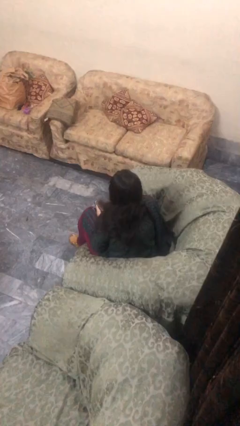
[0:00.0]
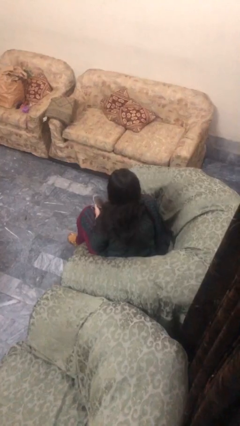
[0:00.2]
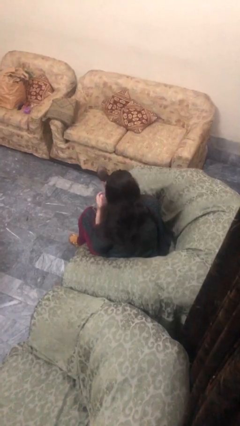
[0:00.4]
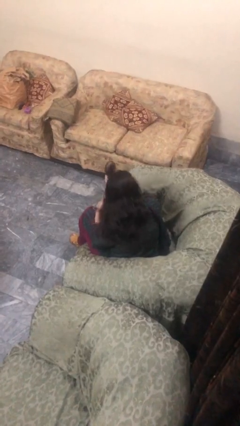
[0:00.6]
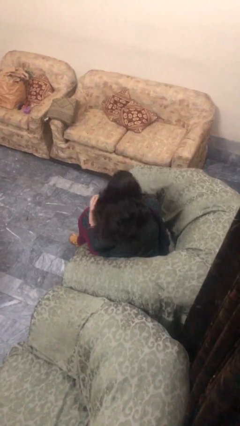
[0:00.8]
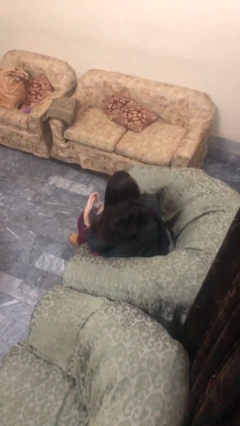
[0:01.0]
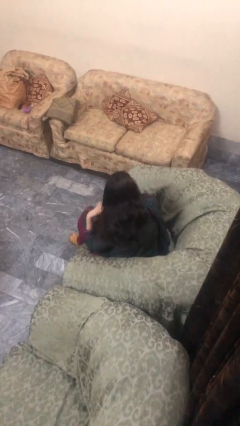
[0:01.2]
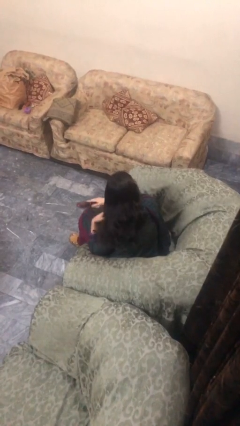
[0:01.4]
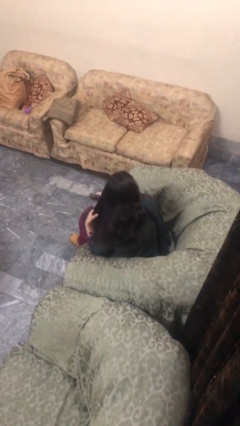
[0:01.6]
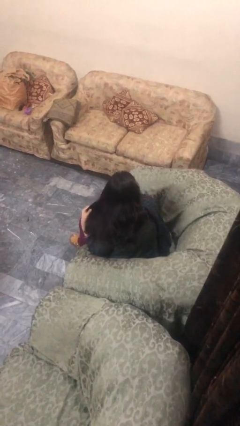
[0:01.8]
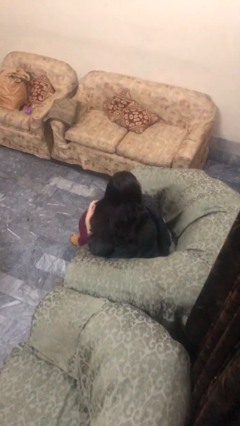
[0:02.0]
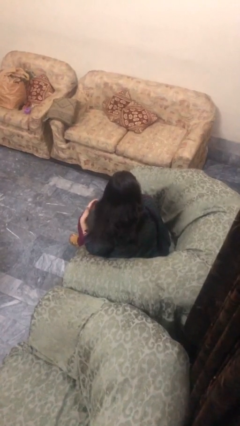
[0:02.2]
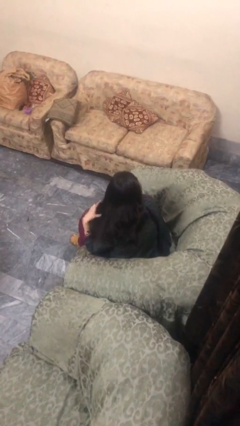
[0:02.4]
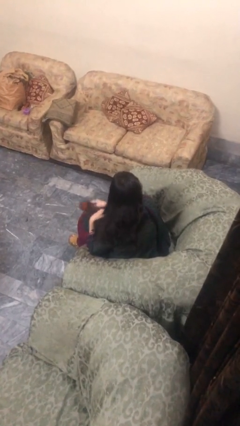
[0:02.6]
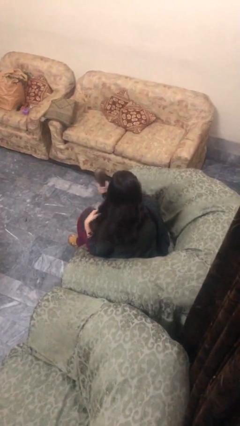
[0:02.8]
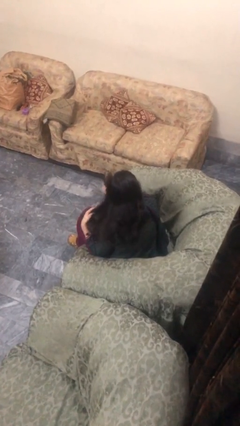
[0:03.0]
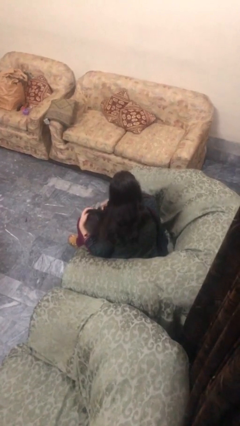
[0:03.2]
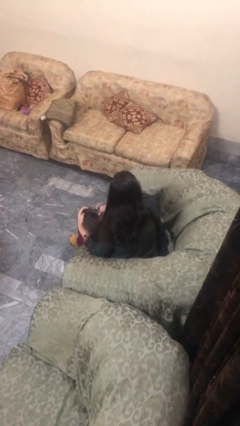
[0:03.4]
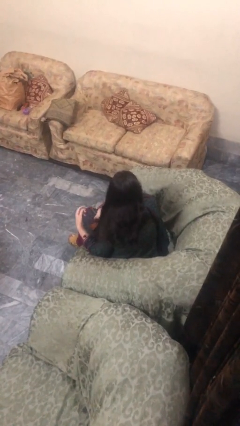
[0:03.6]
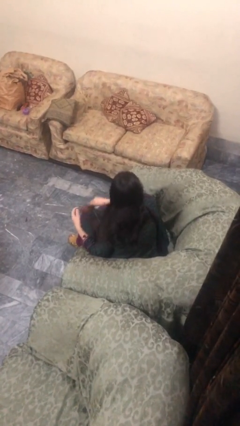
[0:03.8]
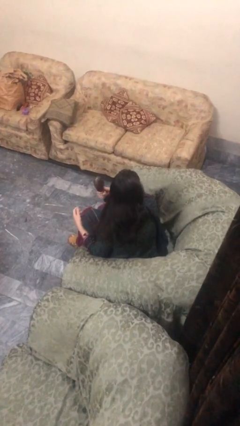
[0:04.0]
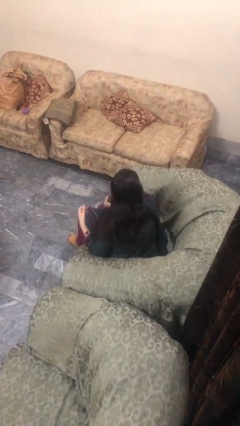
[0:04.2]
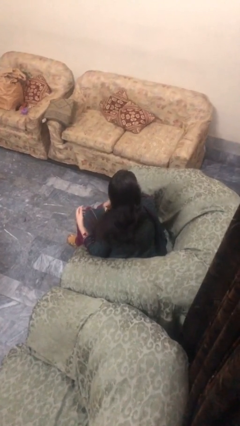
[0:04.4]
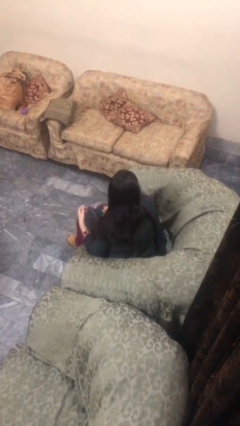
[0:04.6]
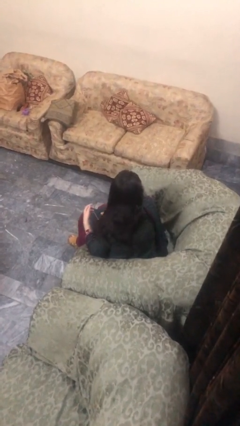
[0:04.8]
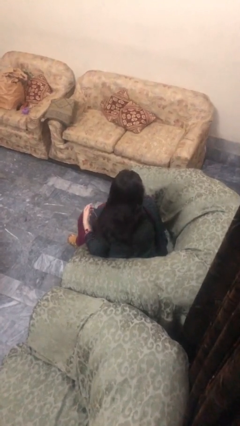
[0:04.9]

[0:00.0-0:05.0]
person brushes hair

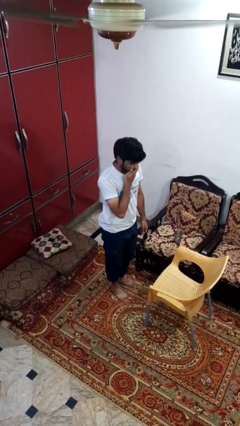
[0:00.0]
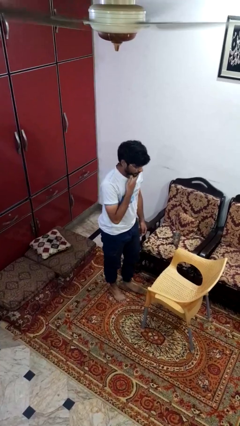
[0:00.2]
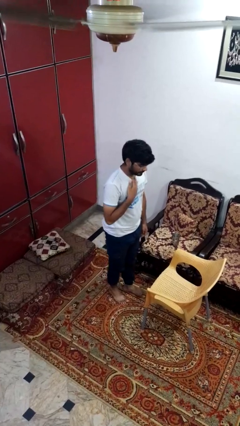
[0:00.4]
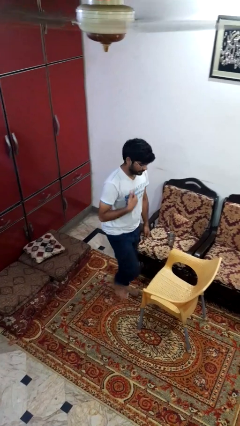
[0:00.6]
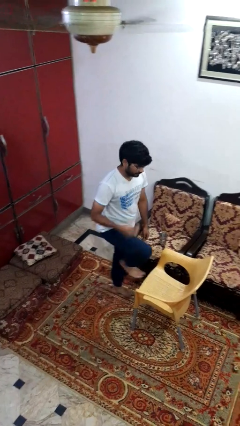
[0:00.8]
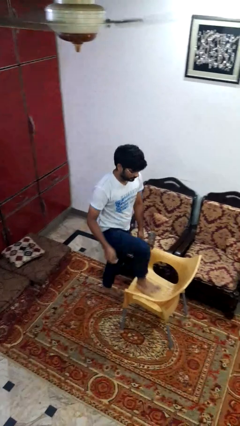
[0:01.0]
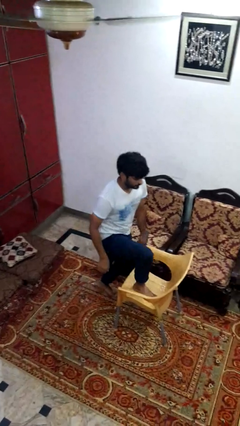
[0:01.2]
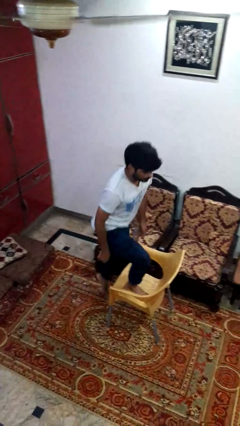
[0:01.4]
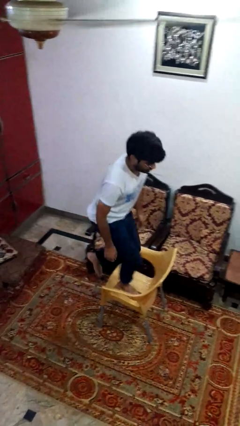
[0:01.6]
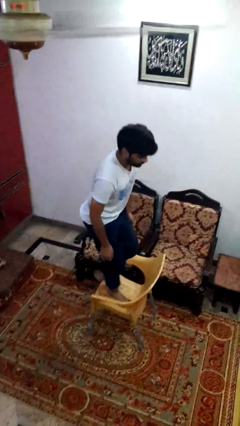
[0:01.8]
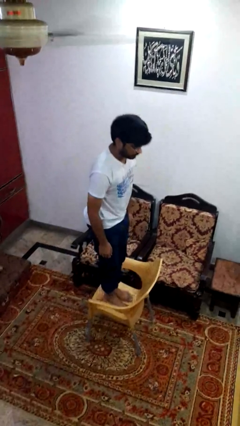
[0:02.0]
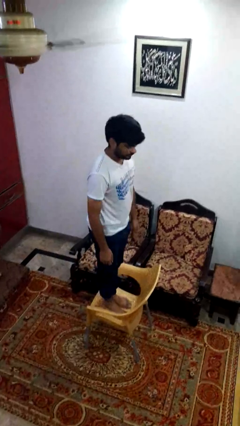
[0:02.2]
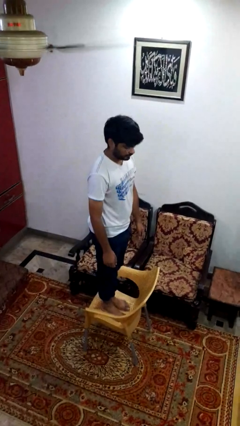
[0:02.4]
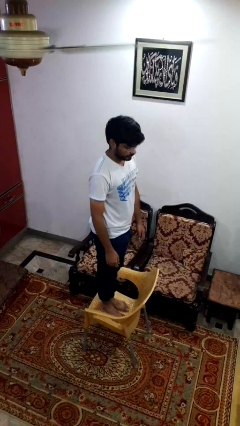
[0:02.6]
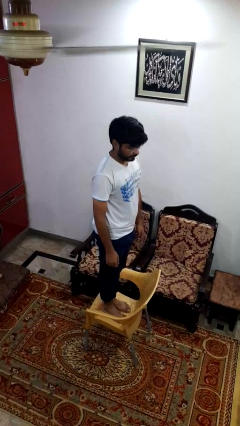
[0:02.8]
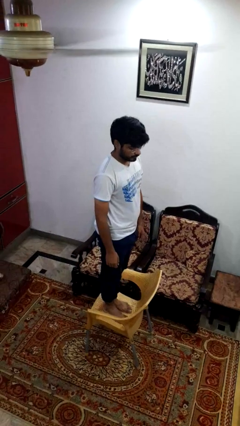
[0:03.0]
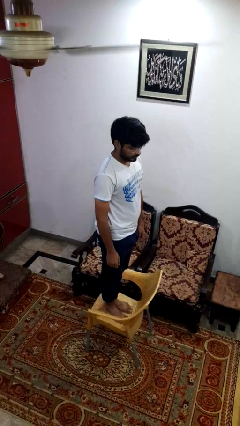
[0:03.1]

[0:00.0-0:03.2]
person climbs on chair

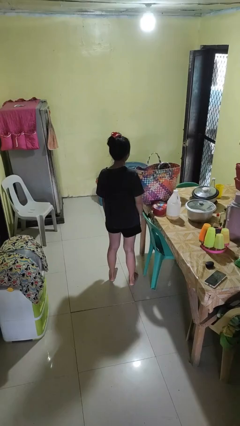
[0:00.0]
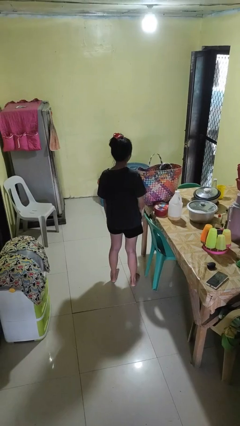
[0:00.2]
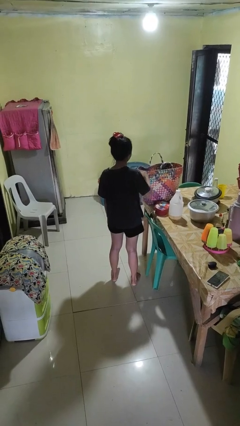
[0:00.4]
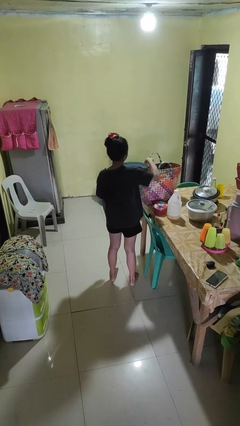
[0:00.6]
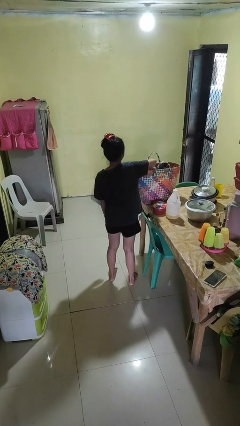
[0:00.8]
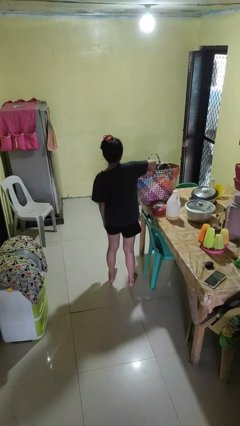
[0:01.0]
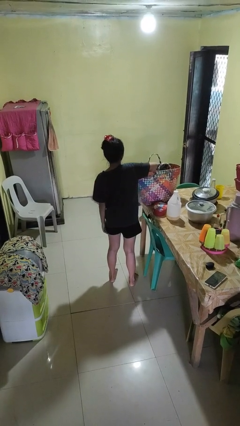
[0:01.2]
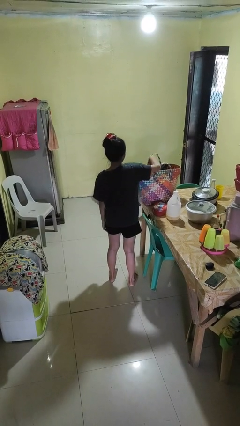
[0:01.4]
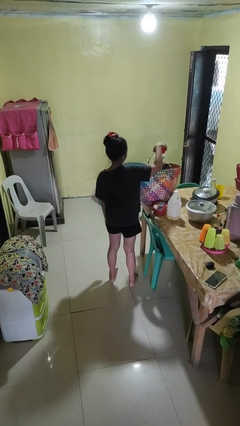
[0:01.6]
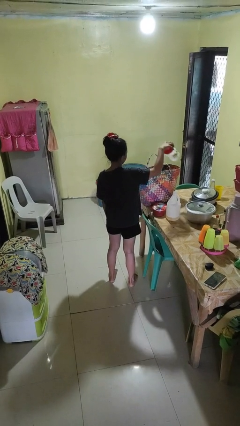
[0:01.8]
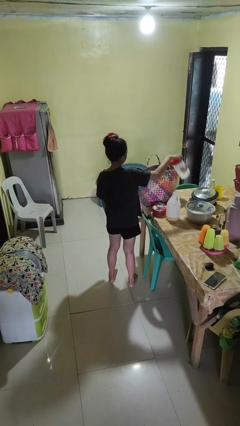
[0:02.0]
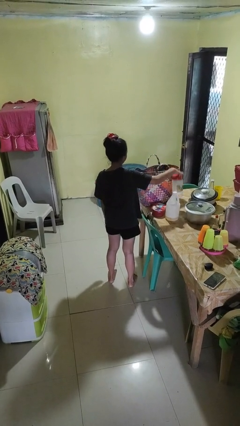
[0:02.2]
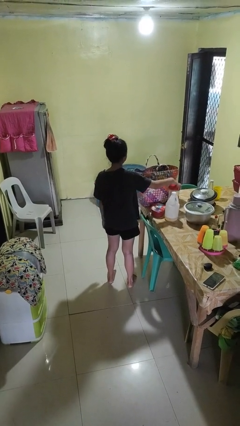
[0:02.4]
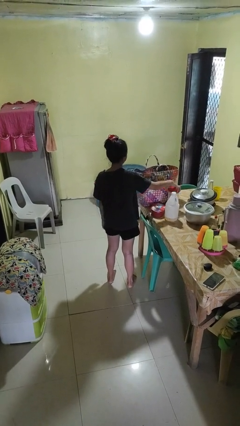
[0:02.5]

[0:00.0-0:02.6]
person takes object from basket

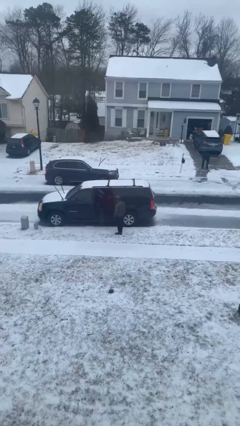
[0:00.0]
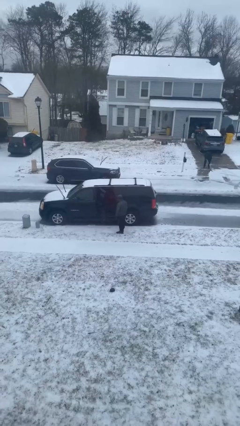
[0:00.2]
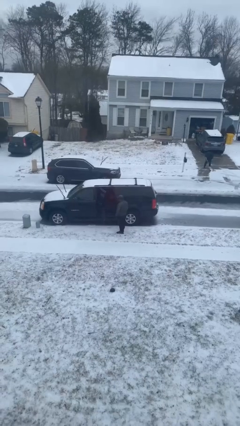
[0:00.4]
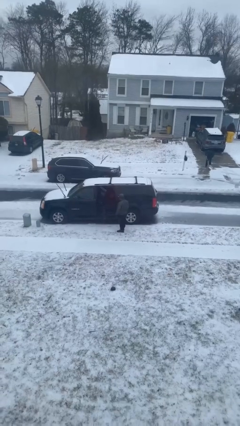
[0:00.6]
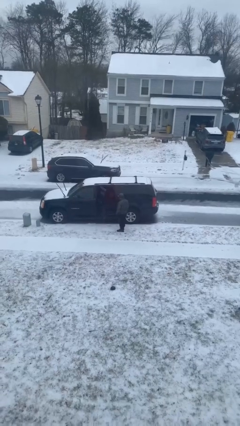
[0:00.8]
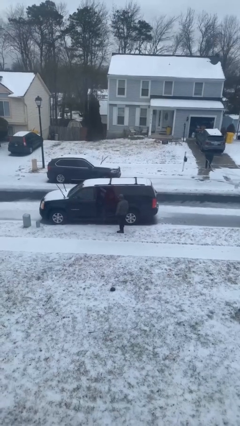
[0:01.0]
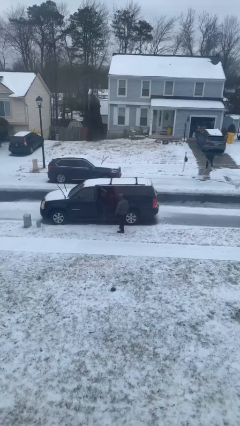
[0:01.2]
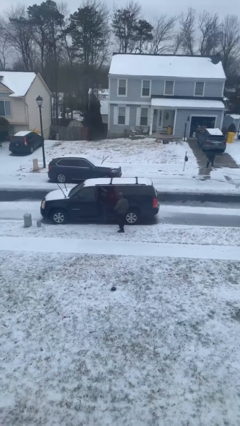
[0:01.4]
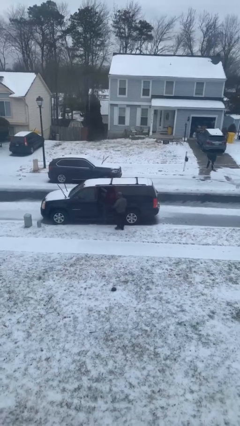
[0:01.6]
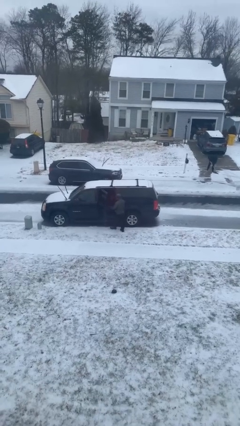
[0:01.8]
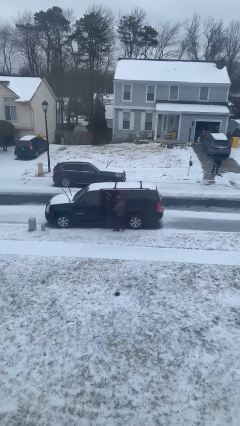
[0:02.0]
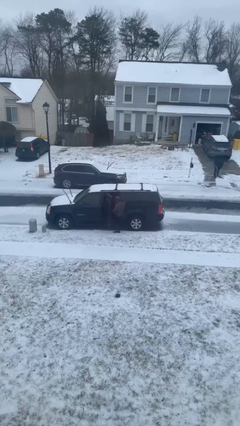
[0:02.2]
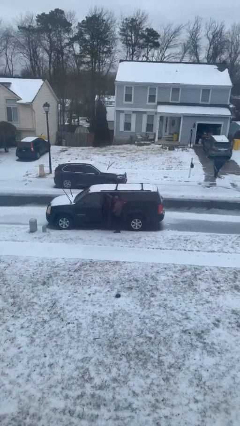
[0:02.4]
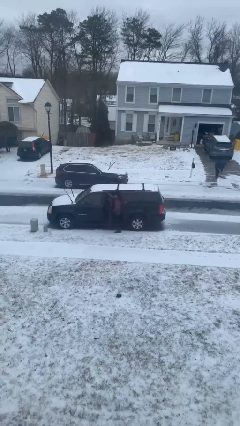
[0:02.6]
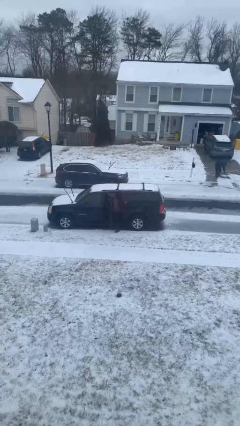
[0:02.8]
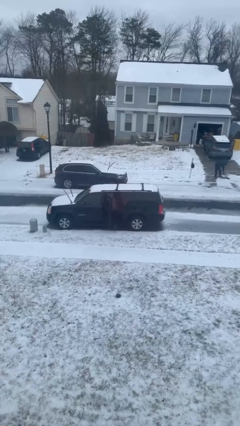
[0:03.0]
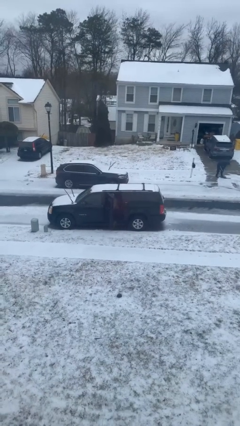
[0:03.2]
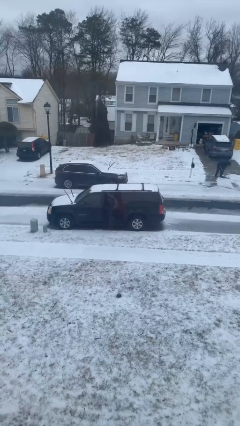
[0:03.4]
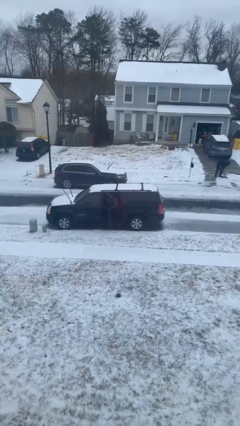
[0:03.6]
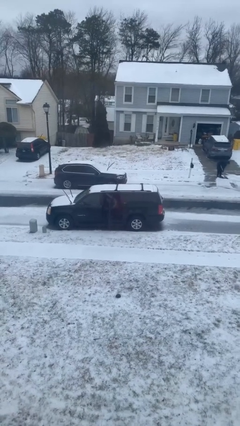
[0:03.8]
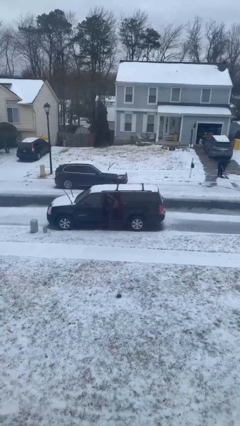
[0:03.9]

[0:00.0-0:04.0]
person enters car

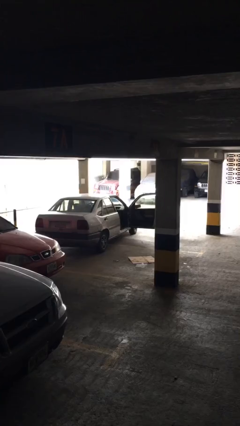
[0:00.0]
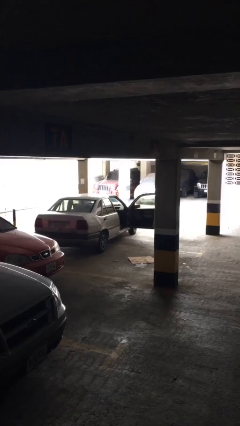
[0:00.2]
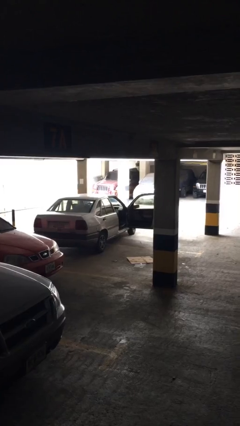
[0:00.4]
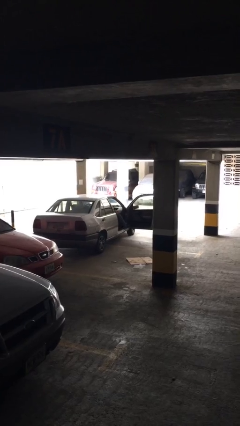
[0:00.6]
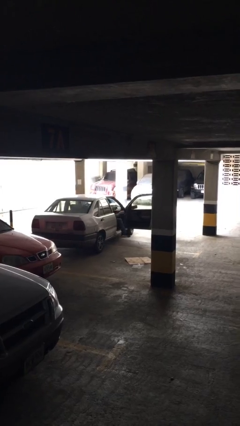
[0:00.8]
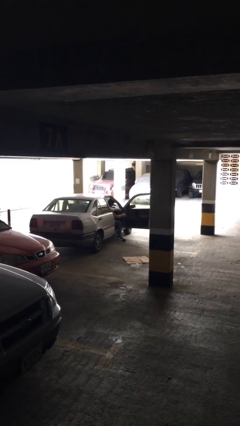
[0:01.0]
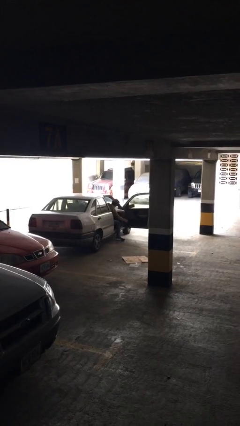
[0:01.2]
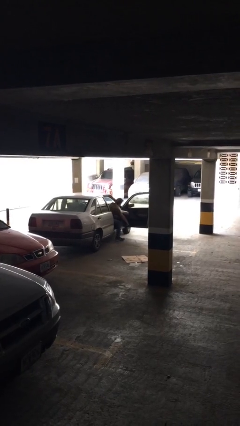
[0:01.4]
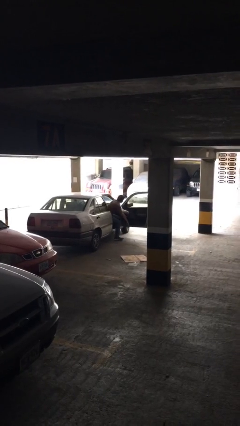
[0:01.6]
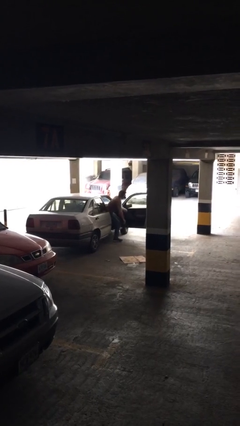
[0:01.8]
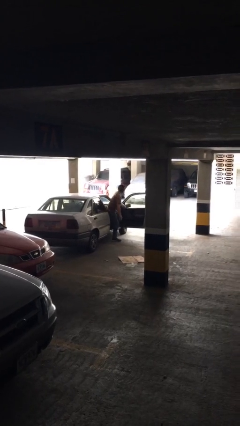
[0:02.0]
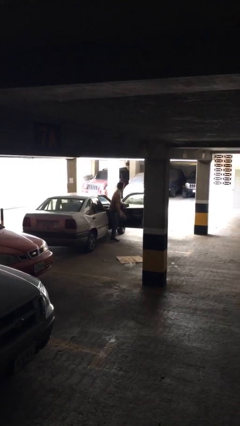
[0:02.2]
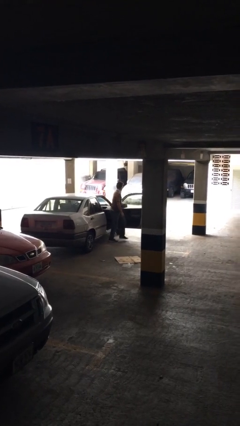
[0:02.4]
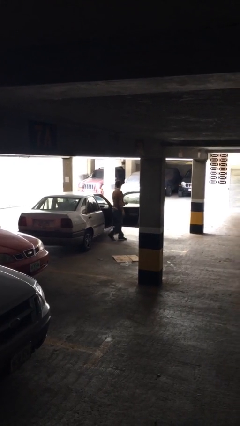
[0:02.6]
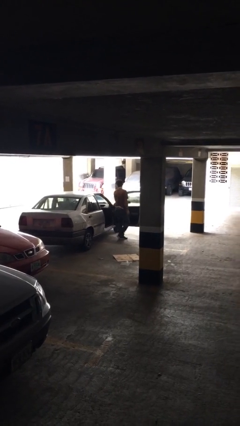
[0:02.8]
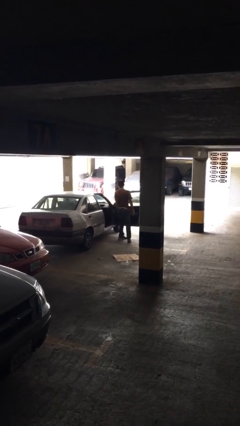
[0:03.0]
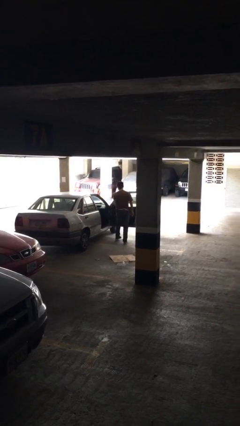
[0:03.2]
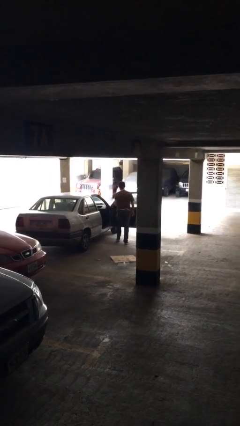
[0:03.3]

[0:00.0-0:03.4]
person exits car
